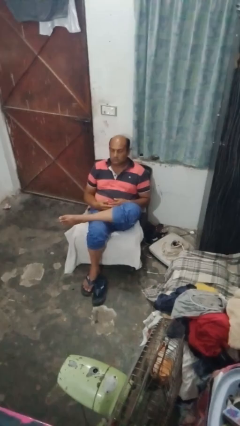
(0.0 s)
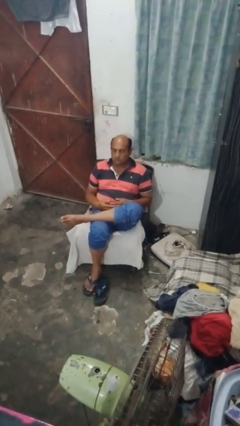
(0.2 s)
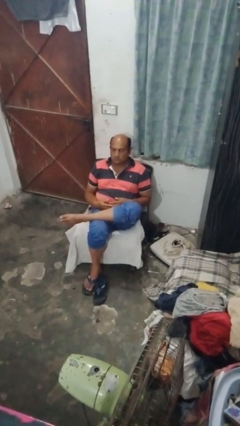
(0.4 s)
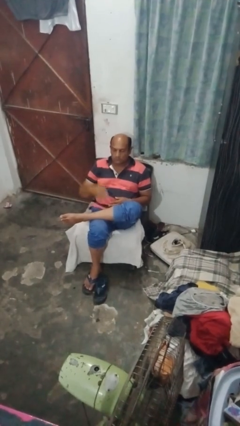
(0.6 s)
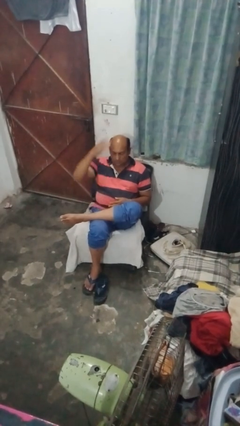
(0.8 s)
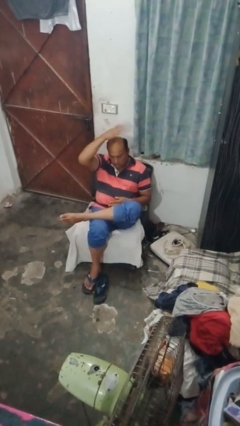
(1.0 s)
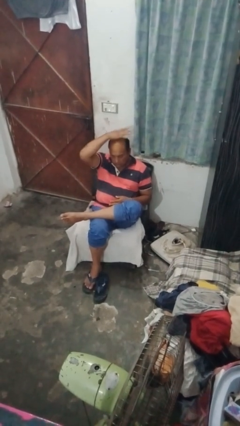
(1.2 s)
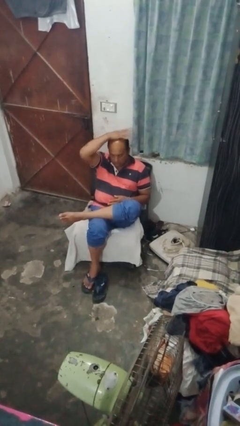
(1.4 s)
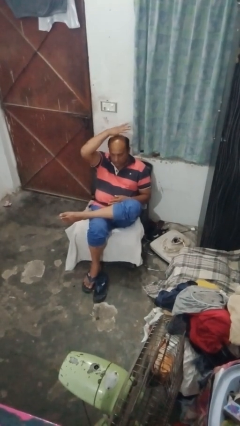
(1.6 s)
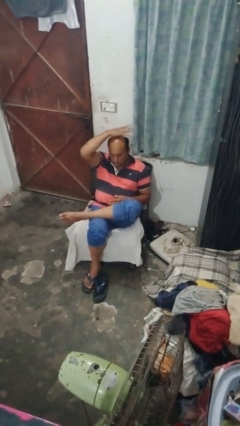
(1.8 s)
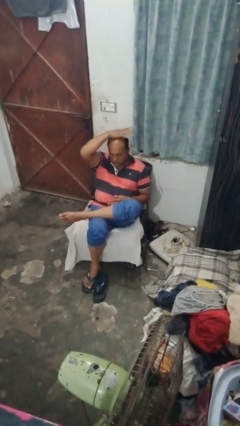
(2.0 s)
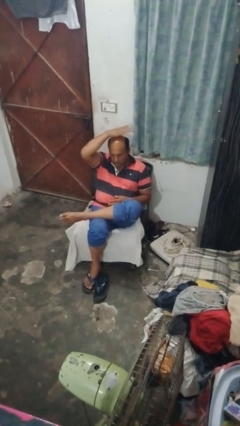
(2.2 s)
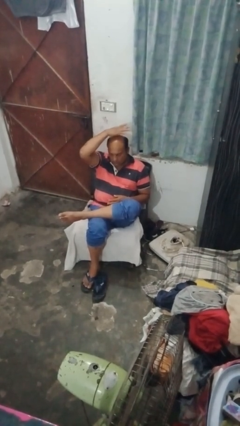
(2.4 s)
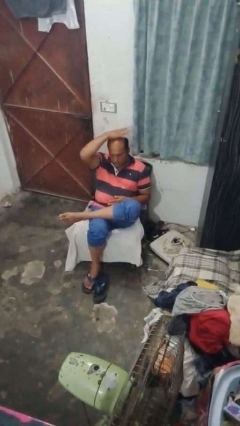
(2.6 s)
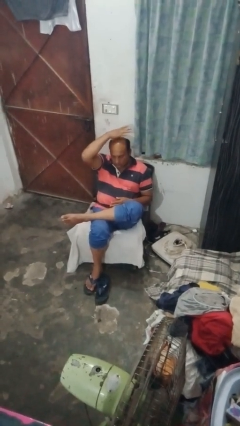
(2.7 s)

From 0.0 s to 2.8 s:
person pats head

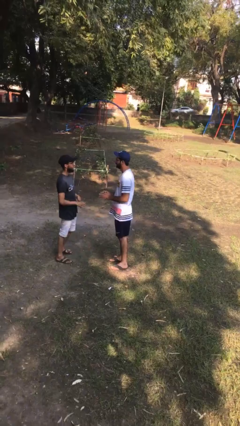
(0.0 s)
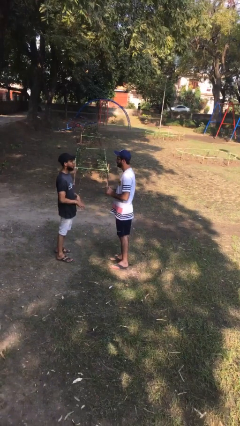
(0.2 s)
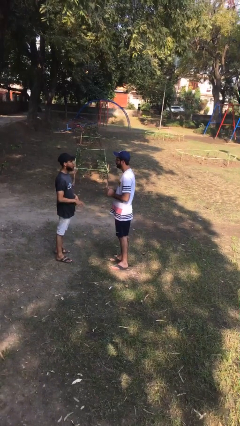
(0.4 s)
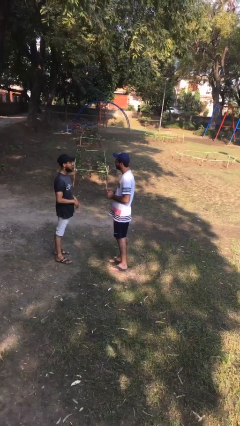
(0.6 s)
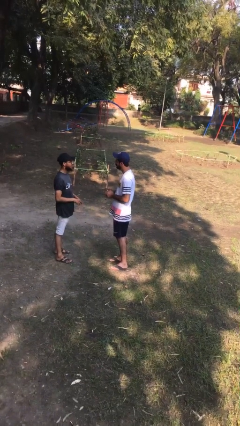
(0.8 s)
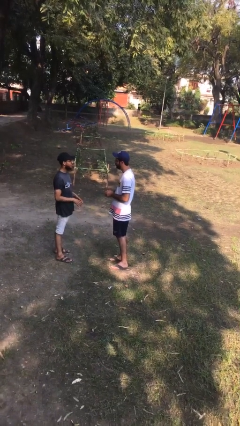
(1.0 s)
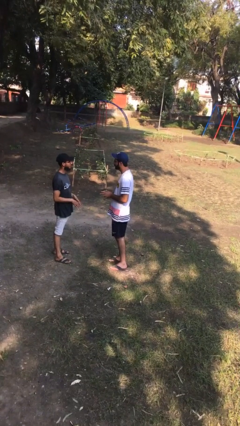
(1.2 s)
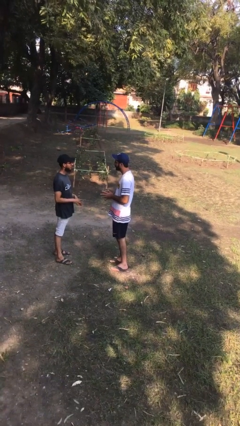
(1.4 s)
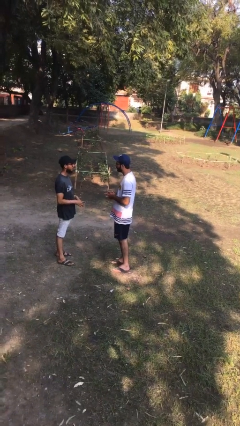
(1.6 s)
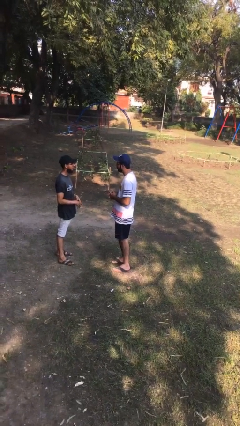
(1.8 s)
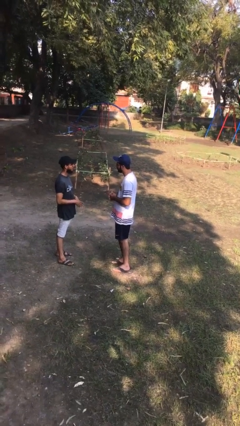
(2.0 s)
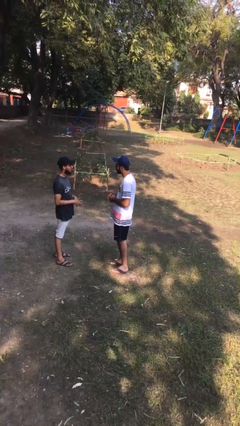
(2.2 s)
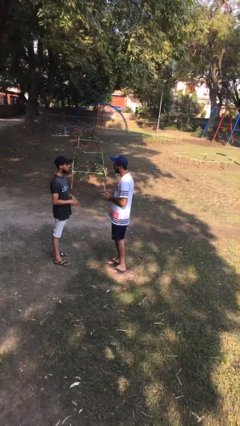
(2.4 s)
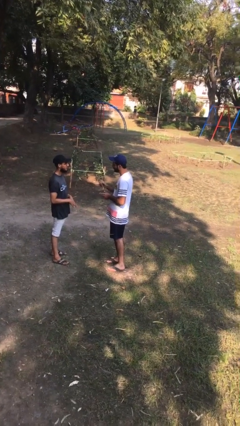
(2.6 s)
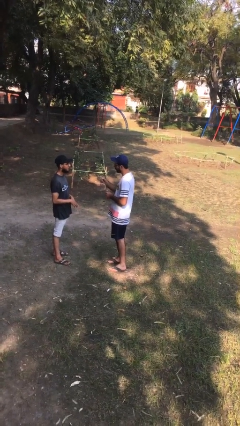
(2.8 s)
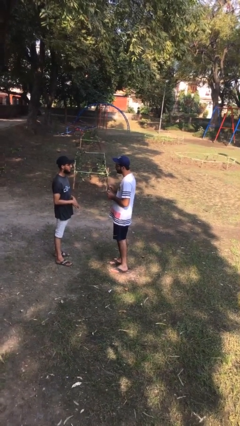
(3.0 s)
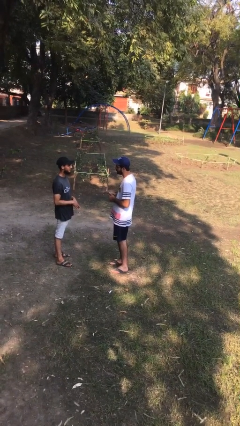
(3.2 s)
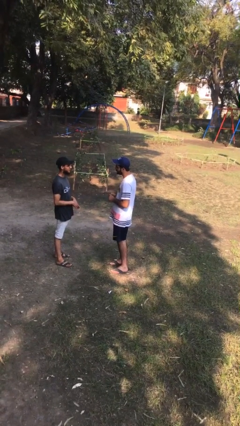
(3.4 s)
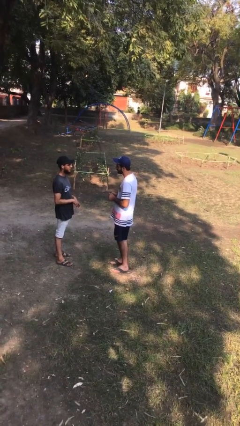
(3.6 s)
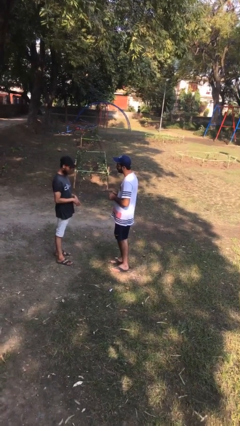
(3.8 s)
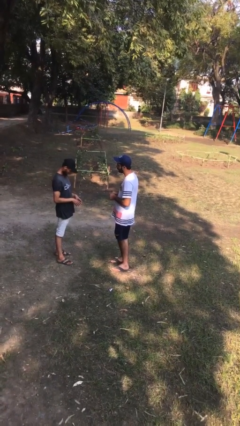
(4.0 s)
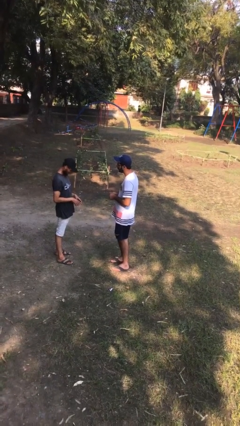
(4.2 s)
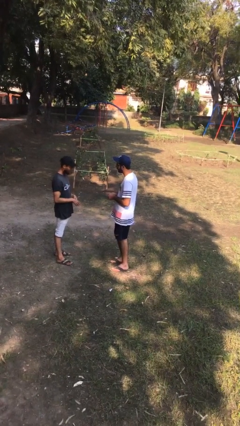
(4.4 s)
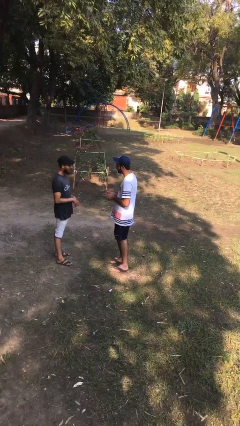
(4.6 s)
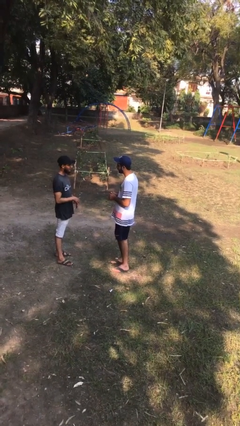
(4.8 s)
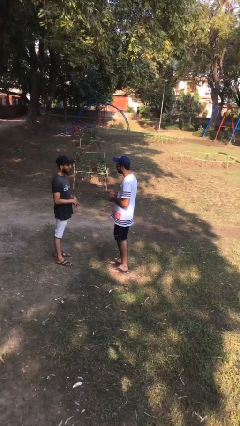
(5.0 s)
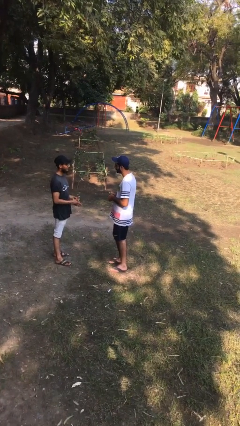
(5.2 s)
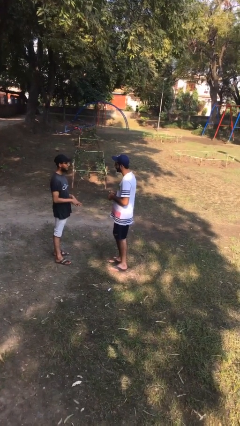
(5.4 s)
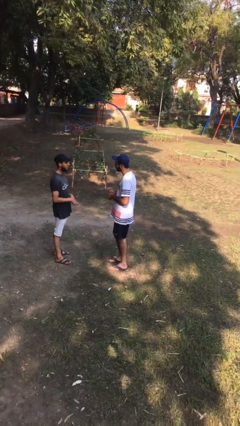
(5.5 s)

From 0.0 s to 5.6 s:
person talks to person

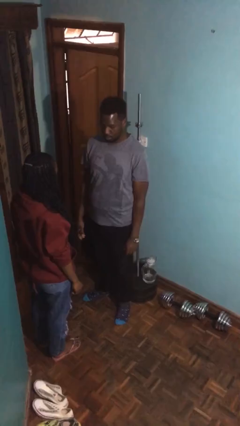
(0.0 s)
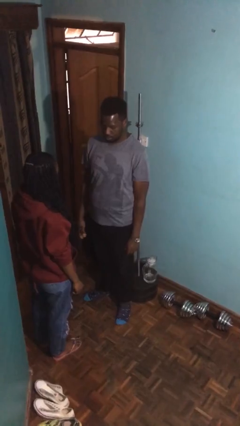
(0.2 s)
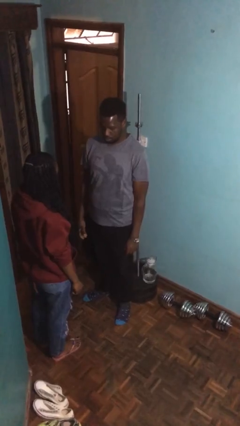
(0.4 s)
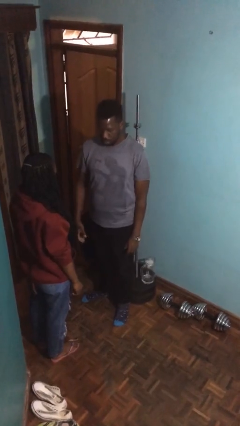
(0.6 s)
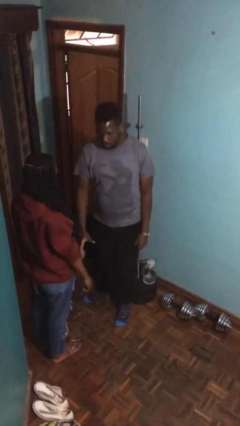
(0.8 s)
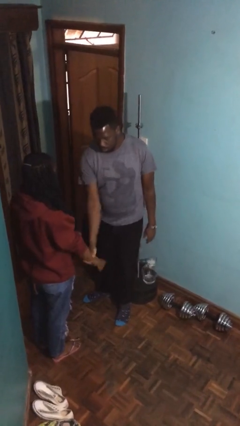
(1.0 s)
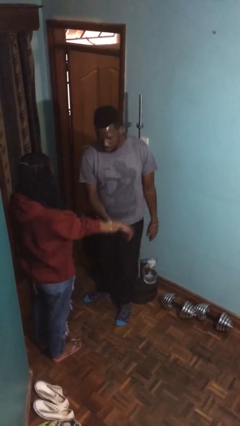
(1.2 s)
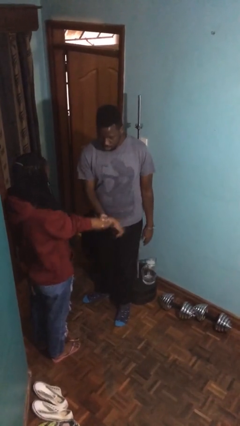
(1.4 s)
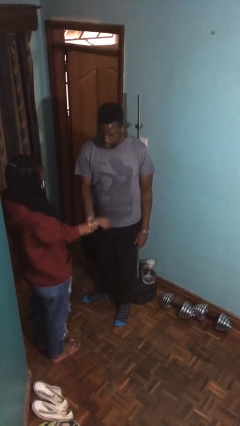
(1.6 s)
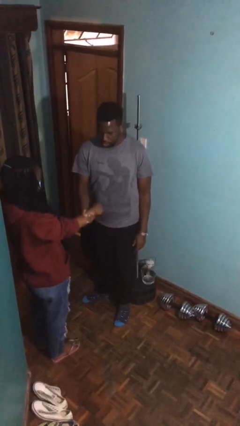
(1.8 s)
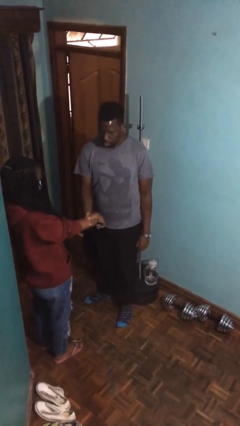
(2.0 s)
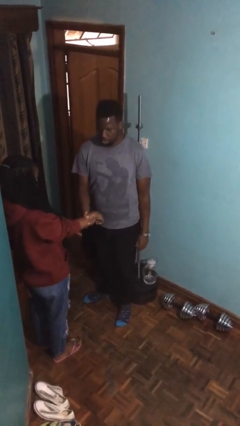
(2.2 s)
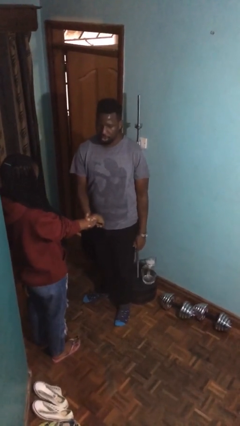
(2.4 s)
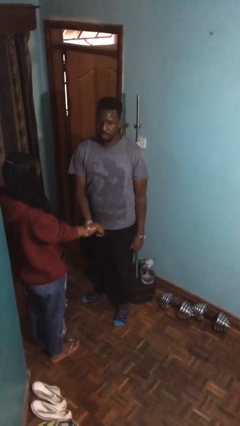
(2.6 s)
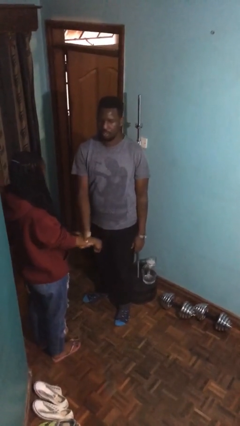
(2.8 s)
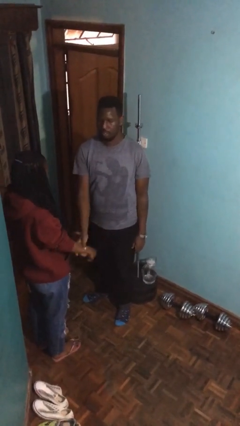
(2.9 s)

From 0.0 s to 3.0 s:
person grabs person by forearm

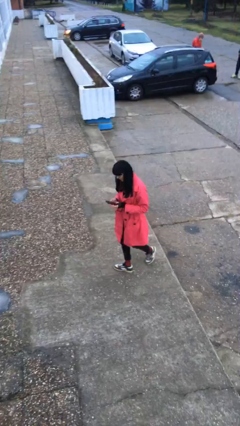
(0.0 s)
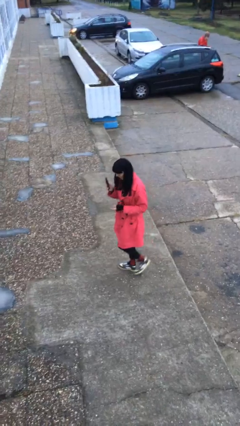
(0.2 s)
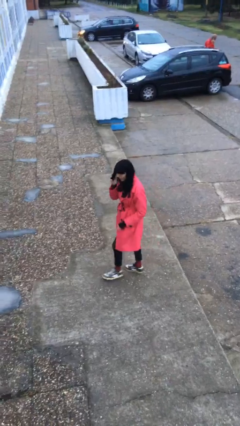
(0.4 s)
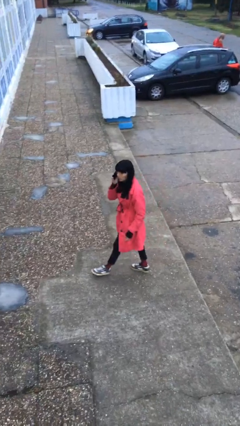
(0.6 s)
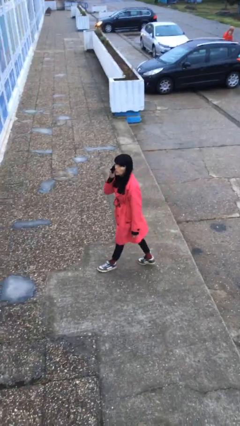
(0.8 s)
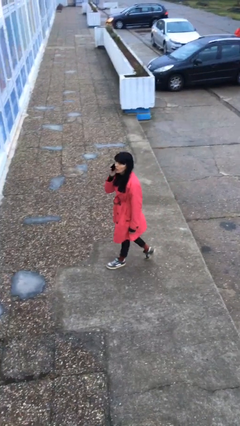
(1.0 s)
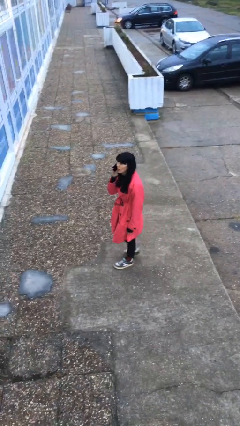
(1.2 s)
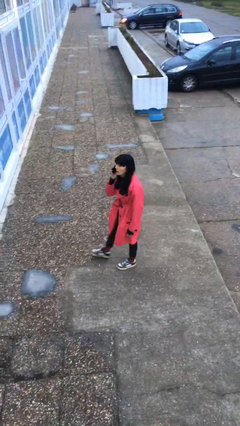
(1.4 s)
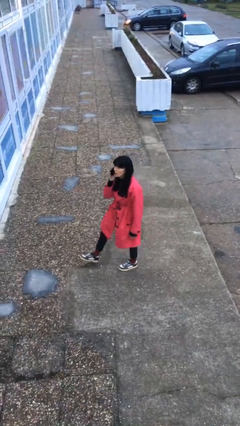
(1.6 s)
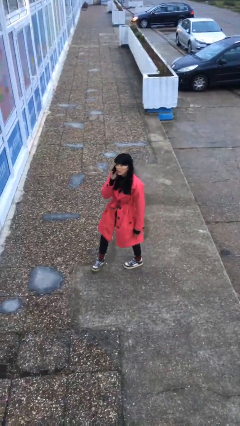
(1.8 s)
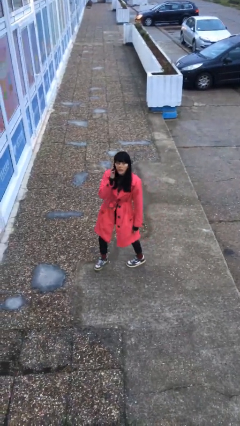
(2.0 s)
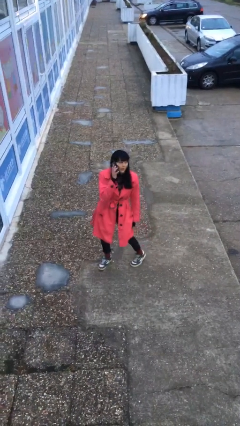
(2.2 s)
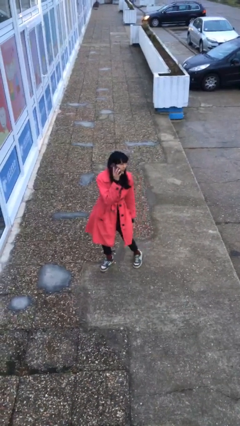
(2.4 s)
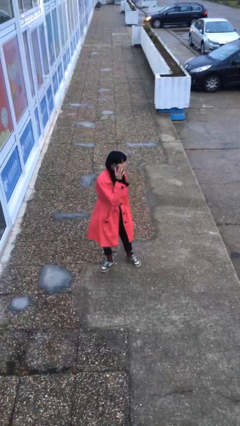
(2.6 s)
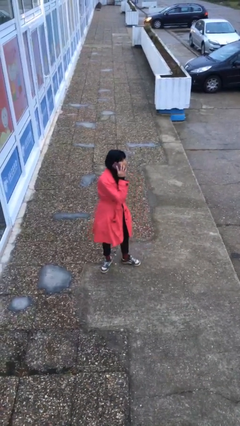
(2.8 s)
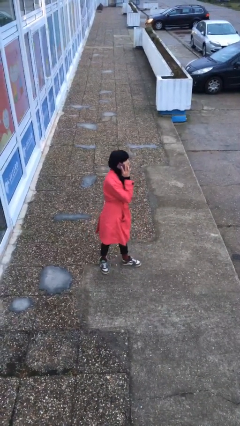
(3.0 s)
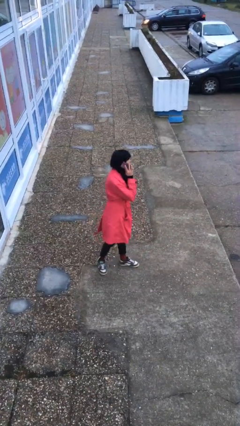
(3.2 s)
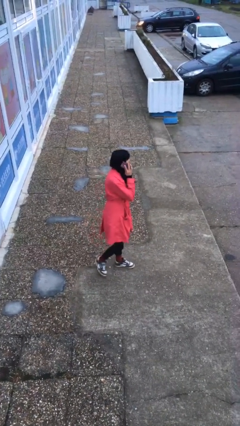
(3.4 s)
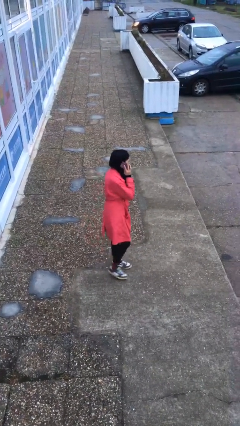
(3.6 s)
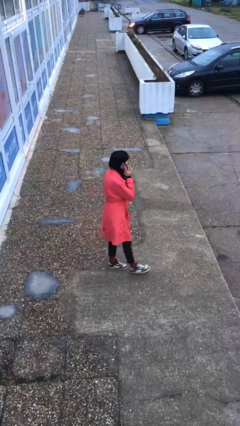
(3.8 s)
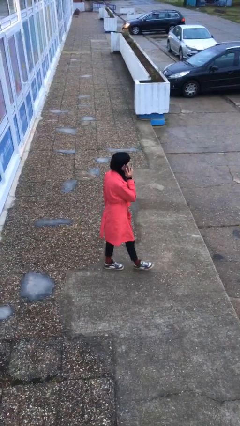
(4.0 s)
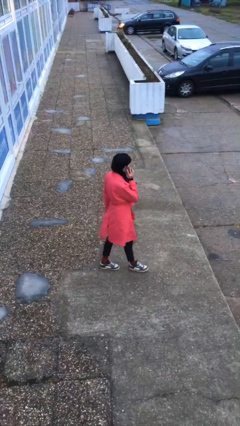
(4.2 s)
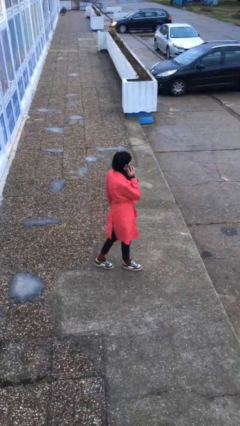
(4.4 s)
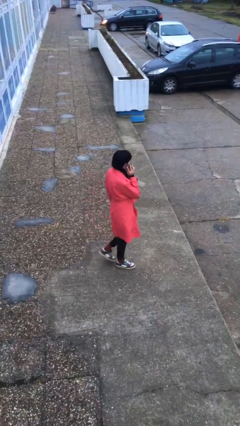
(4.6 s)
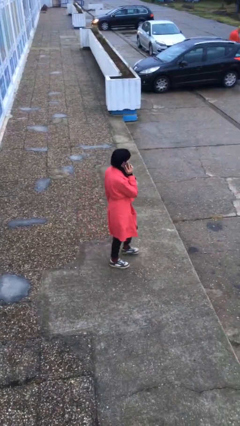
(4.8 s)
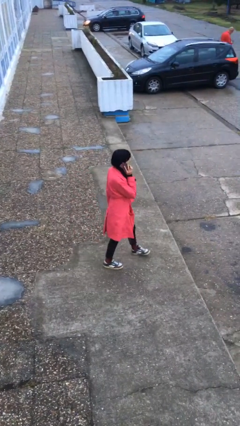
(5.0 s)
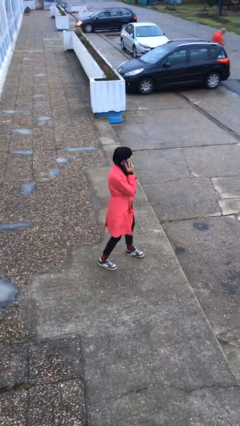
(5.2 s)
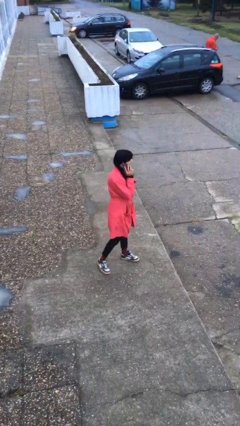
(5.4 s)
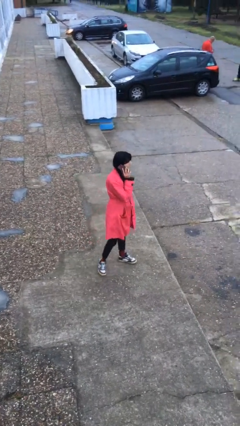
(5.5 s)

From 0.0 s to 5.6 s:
person talks on phone
